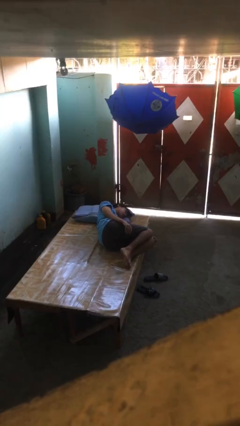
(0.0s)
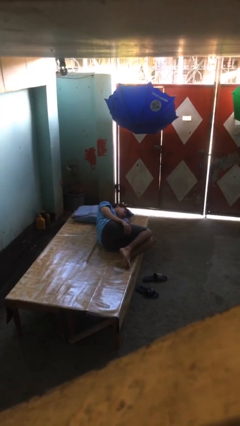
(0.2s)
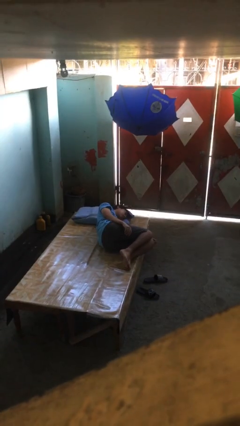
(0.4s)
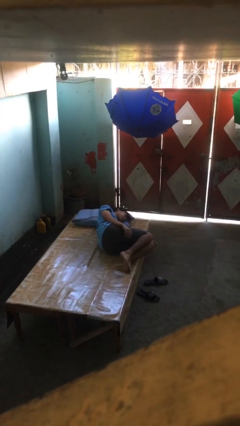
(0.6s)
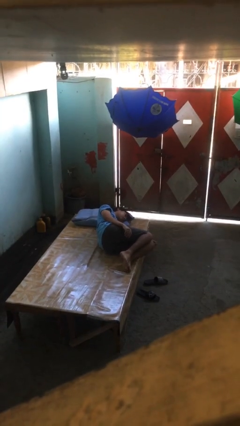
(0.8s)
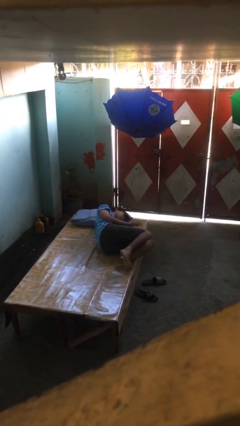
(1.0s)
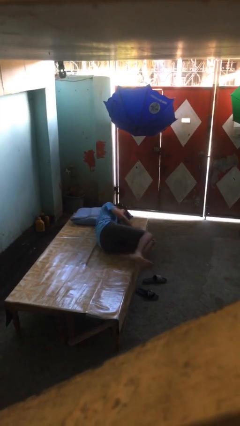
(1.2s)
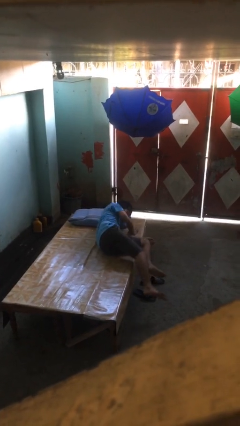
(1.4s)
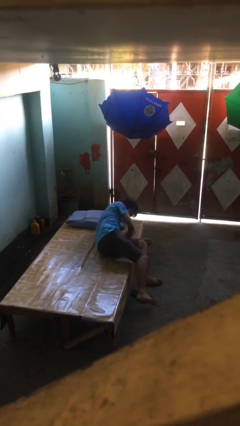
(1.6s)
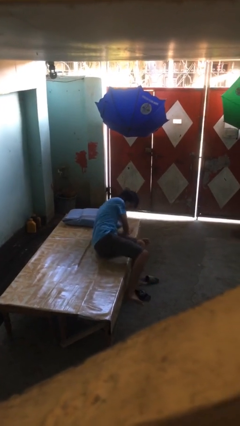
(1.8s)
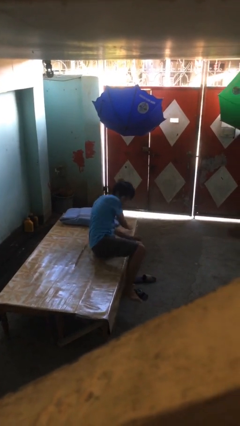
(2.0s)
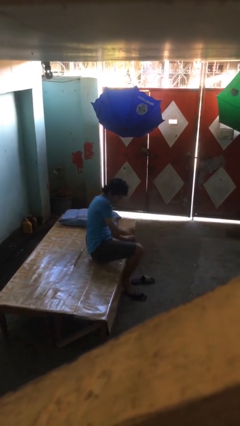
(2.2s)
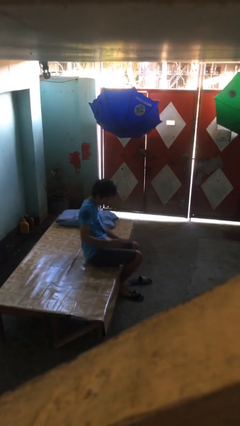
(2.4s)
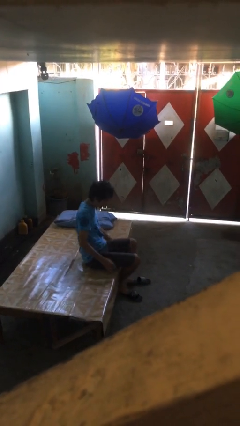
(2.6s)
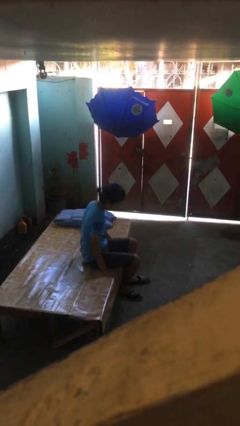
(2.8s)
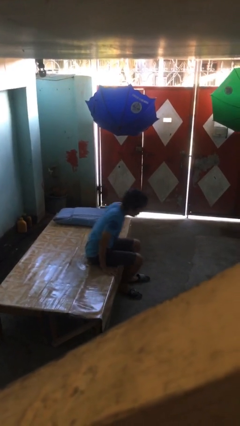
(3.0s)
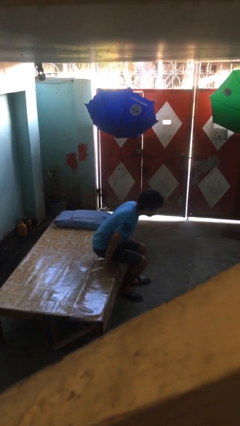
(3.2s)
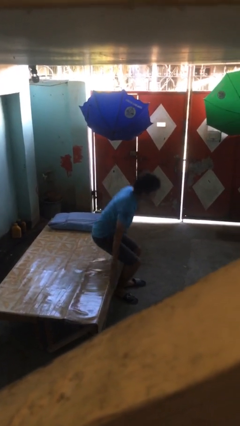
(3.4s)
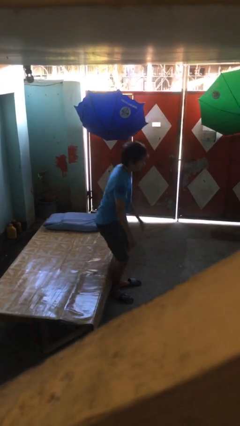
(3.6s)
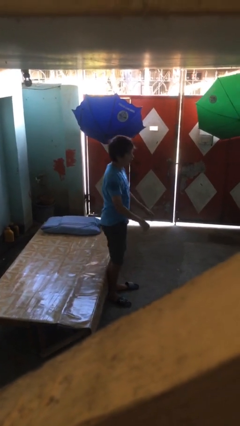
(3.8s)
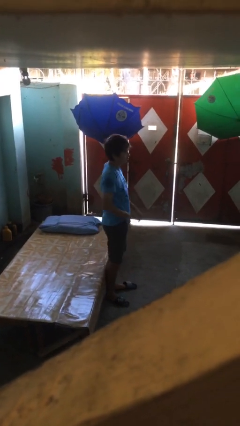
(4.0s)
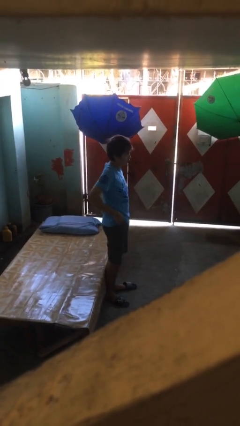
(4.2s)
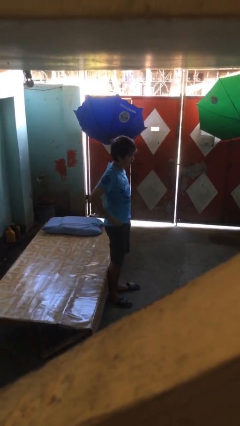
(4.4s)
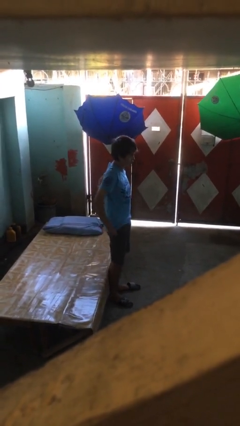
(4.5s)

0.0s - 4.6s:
person stands up

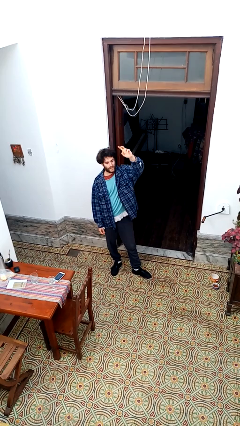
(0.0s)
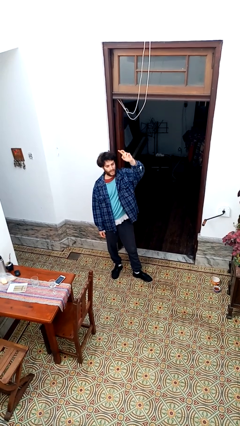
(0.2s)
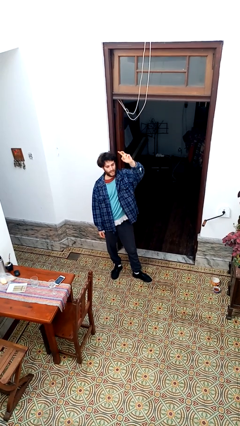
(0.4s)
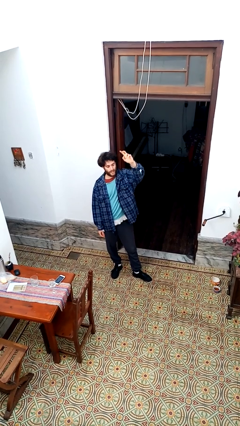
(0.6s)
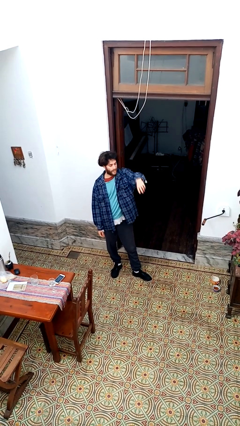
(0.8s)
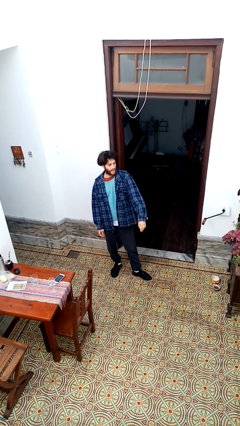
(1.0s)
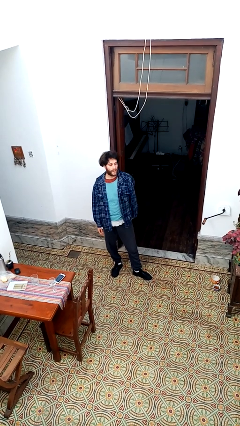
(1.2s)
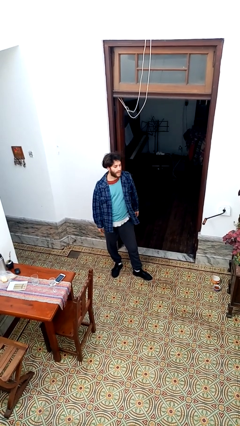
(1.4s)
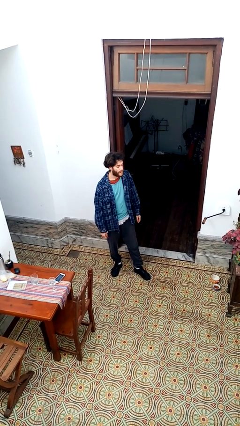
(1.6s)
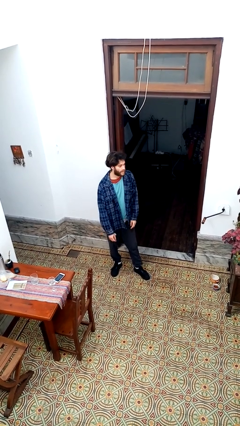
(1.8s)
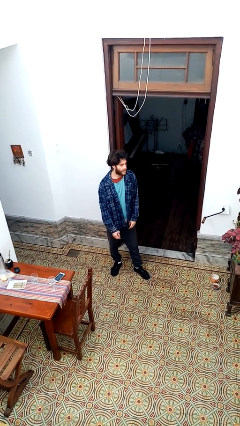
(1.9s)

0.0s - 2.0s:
person gestures lower hand

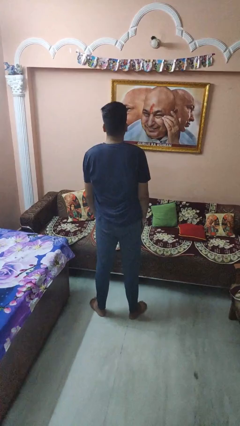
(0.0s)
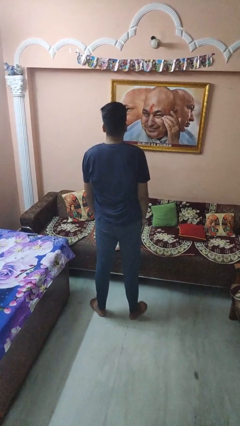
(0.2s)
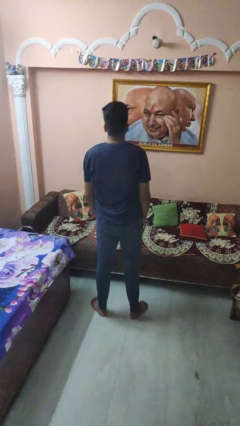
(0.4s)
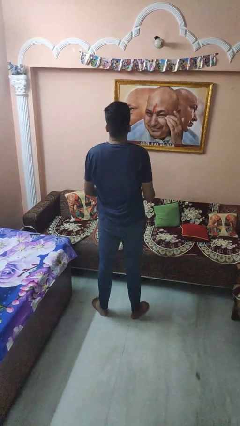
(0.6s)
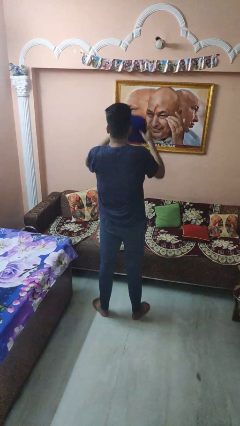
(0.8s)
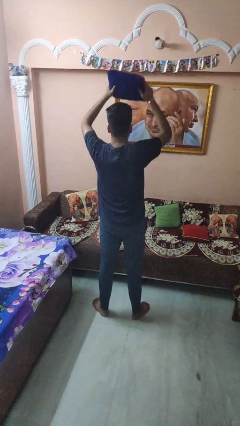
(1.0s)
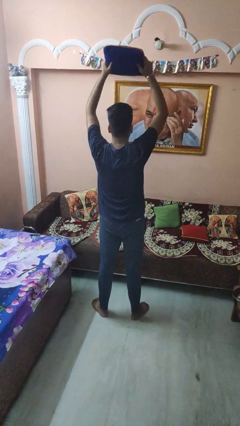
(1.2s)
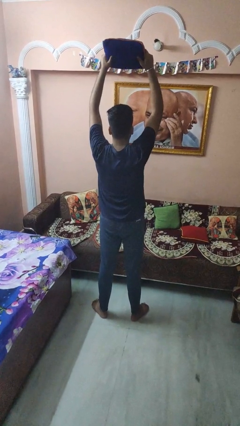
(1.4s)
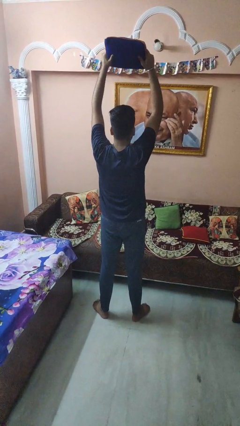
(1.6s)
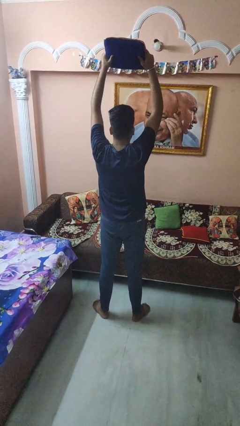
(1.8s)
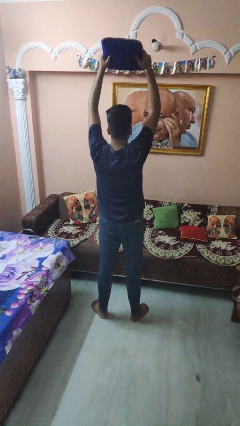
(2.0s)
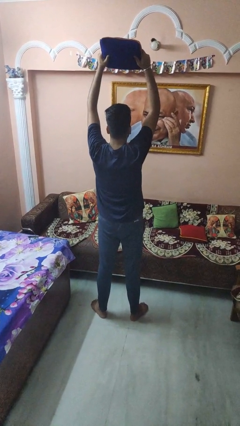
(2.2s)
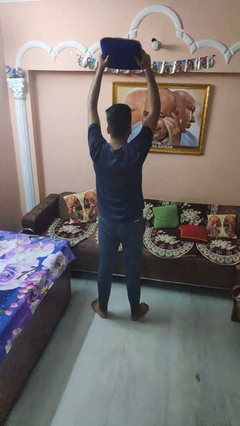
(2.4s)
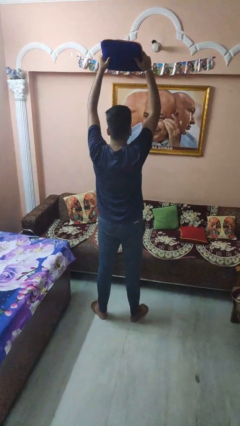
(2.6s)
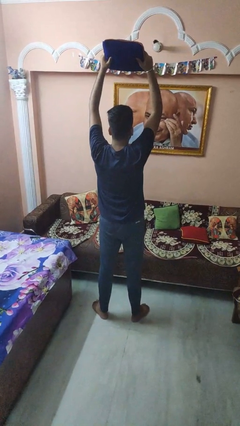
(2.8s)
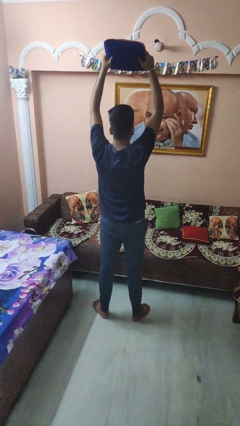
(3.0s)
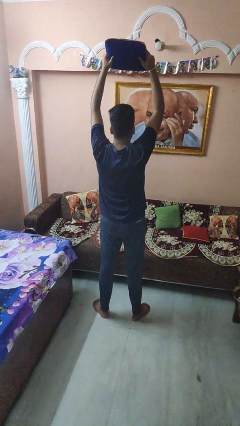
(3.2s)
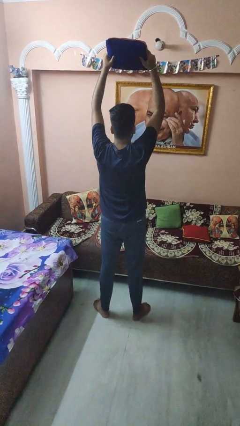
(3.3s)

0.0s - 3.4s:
person holds object above head

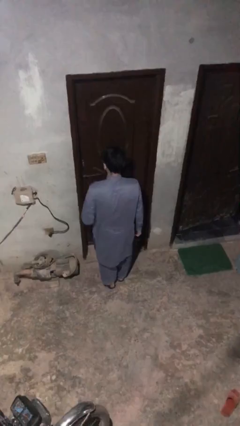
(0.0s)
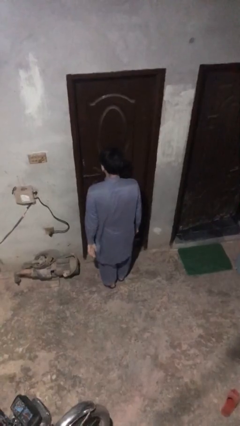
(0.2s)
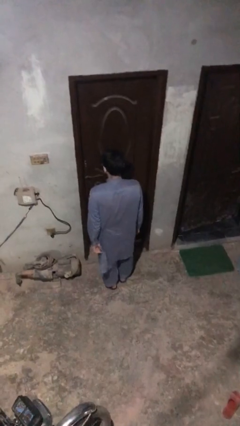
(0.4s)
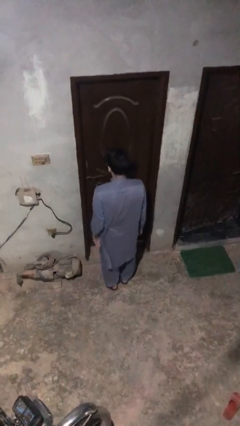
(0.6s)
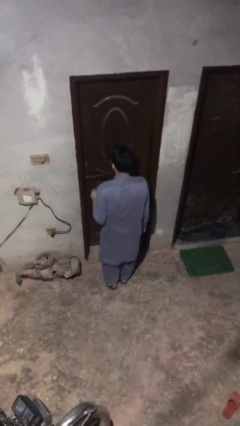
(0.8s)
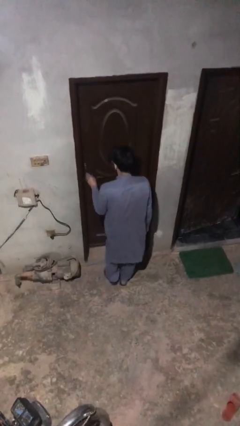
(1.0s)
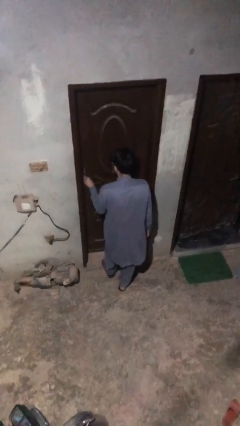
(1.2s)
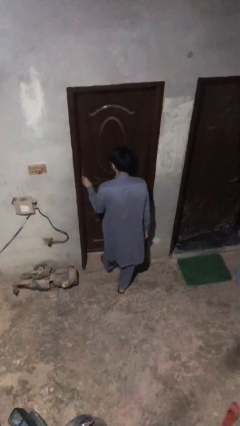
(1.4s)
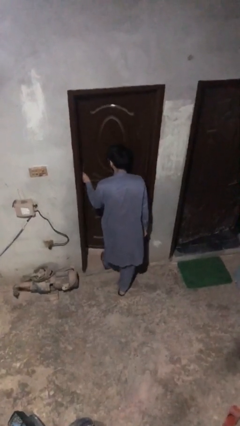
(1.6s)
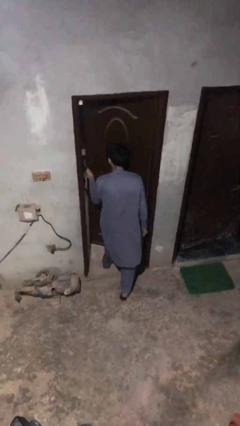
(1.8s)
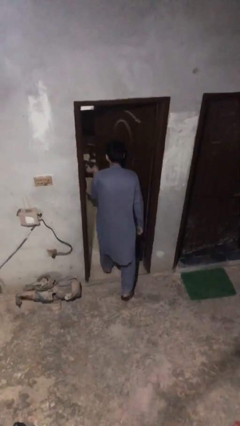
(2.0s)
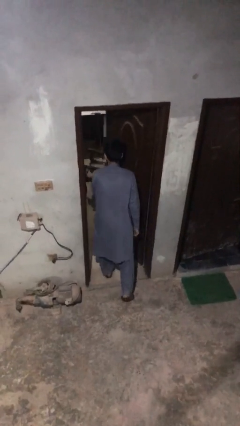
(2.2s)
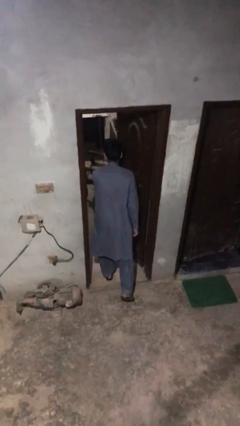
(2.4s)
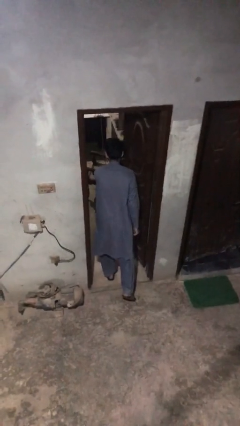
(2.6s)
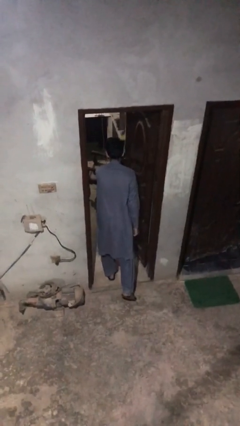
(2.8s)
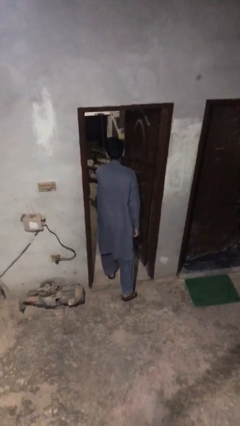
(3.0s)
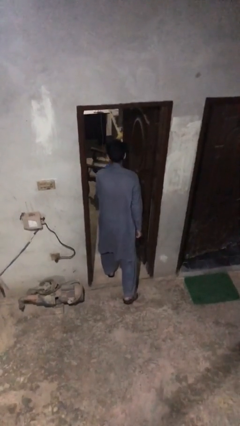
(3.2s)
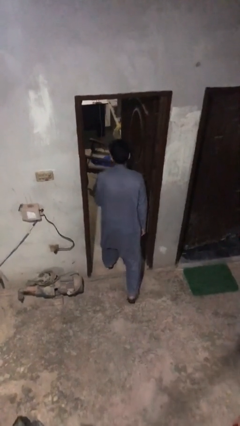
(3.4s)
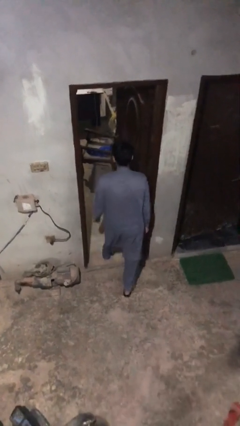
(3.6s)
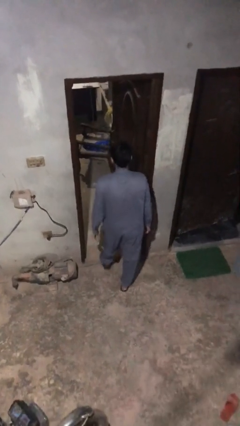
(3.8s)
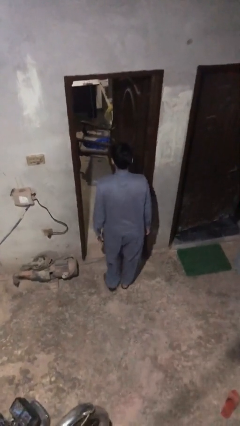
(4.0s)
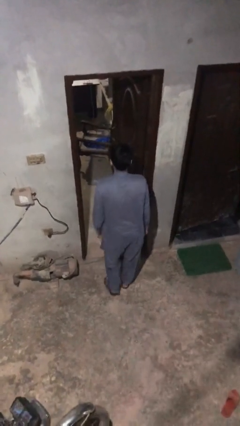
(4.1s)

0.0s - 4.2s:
person opens facility door

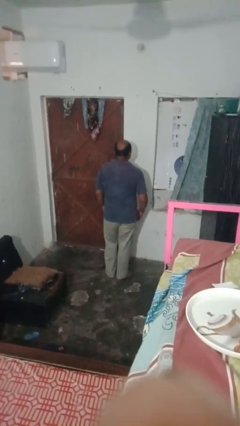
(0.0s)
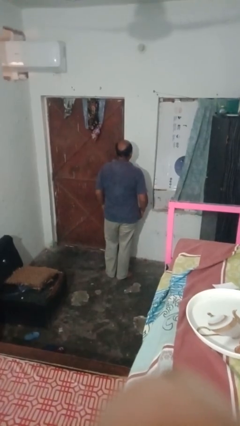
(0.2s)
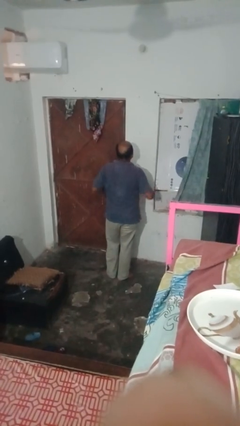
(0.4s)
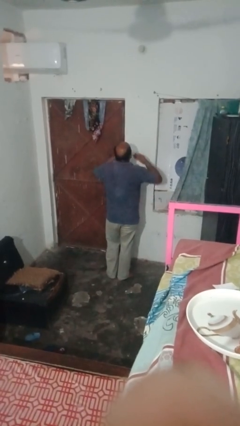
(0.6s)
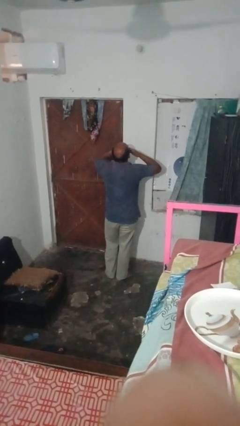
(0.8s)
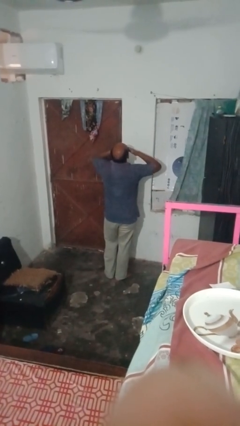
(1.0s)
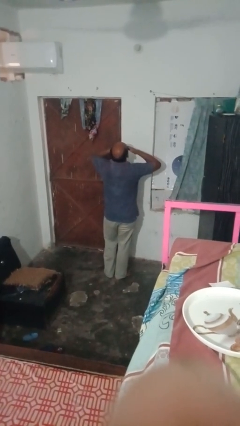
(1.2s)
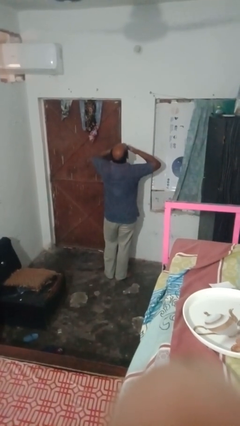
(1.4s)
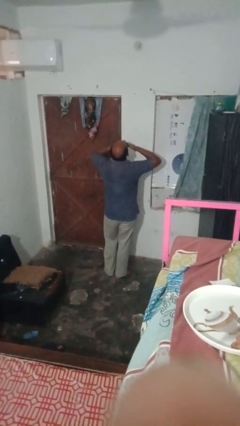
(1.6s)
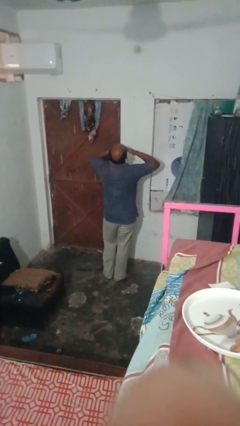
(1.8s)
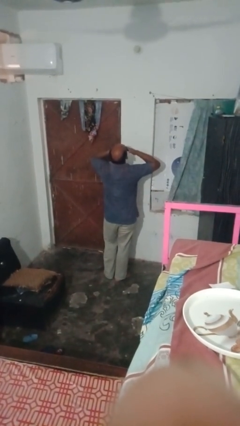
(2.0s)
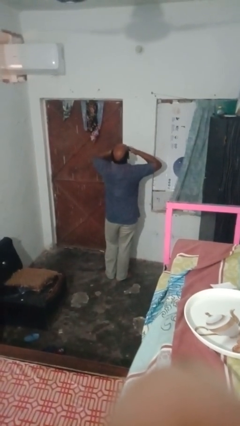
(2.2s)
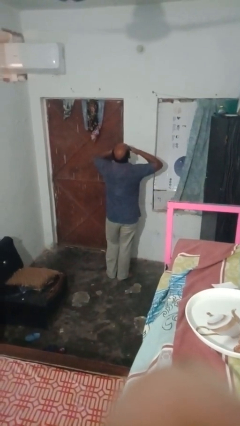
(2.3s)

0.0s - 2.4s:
person yawns

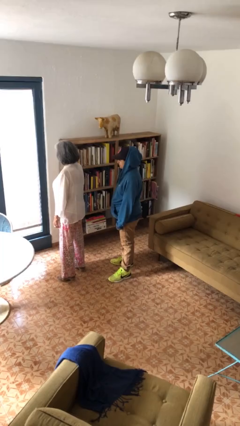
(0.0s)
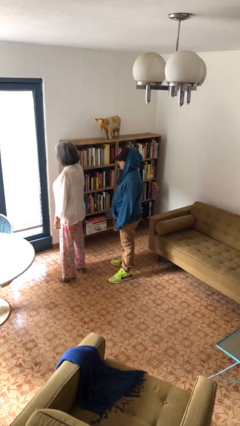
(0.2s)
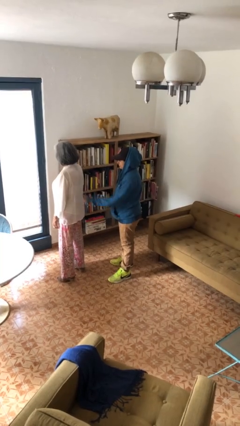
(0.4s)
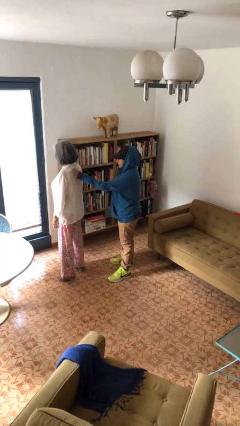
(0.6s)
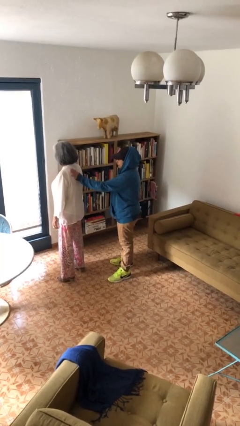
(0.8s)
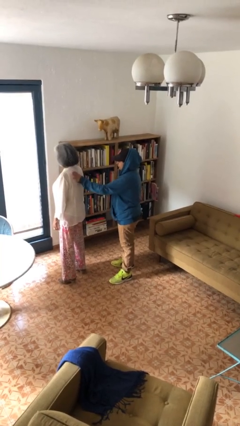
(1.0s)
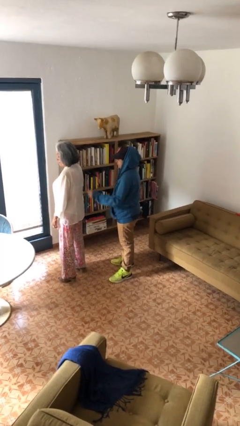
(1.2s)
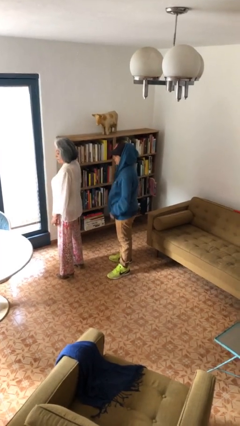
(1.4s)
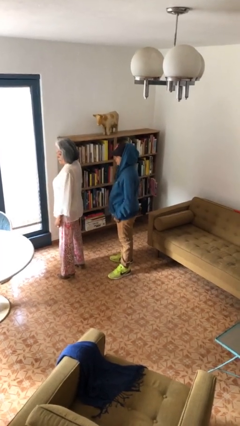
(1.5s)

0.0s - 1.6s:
person touches back of person
